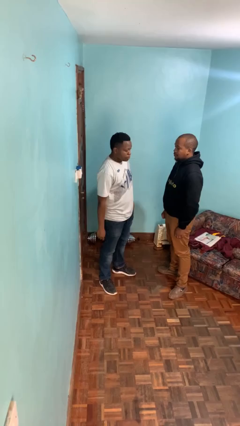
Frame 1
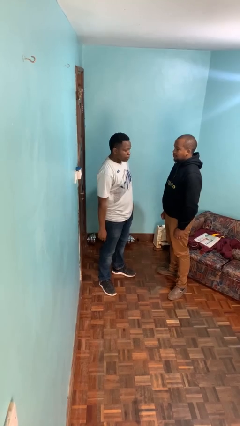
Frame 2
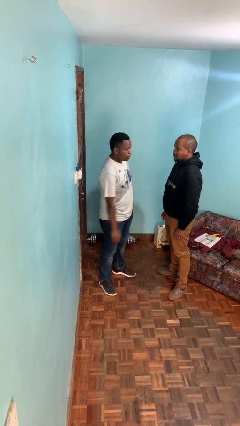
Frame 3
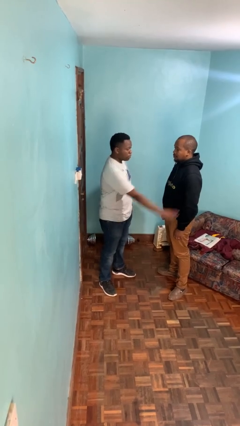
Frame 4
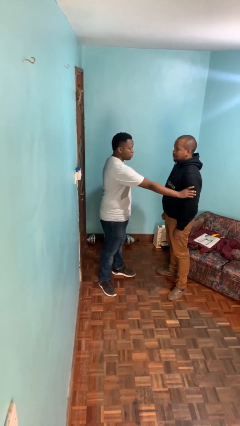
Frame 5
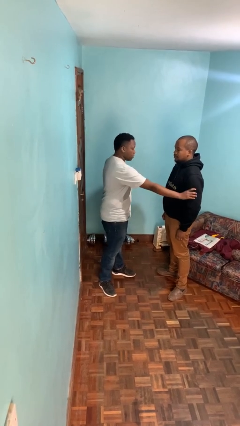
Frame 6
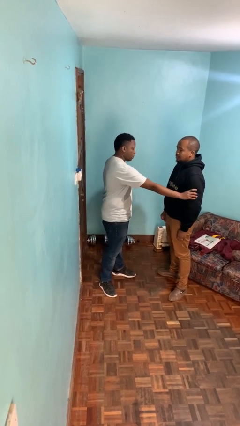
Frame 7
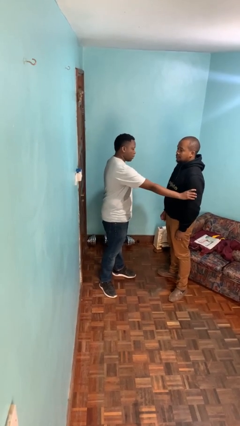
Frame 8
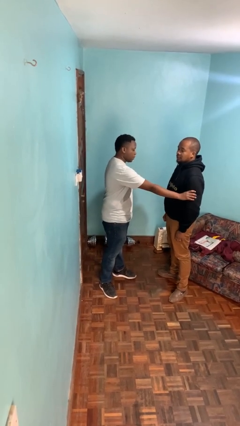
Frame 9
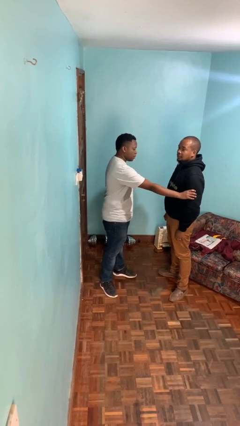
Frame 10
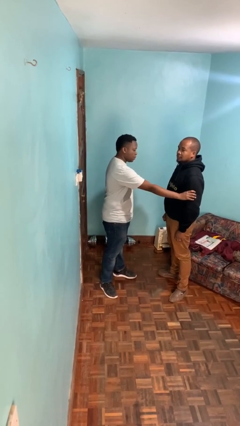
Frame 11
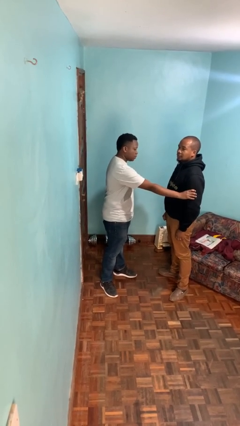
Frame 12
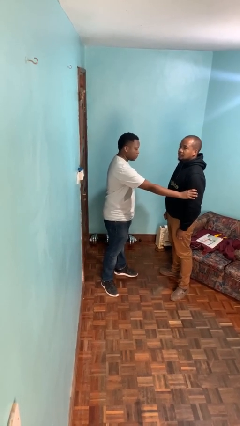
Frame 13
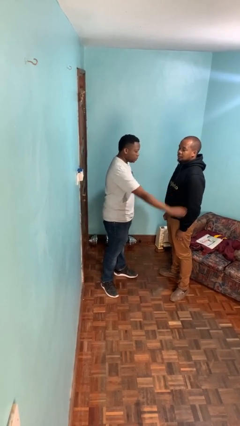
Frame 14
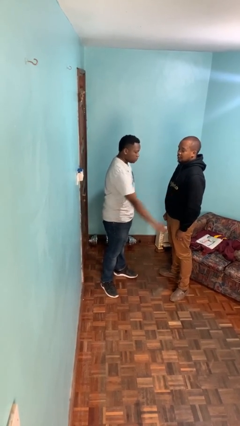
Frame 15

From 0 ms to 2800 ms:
person grabs person by bicep

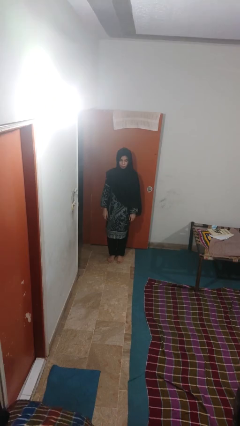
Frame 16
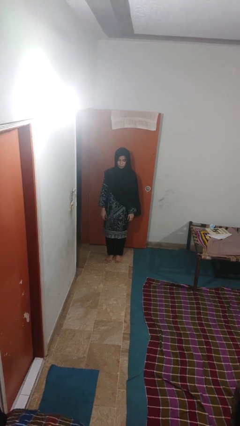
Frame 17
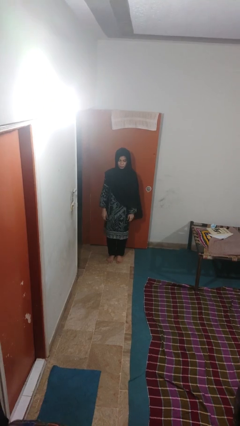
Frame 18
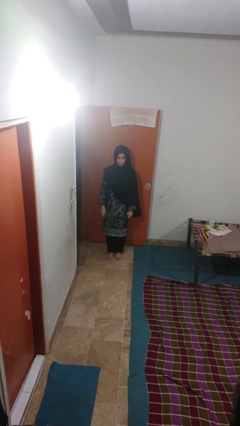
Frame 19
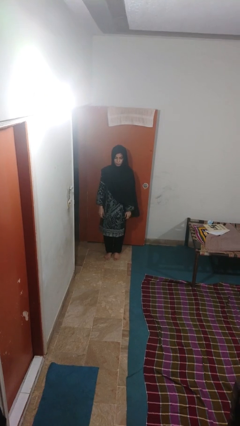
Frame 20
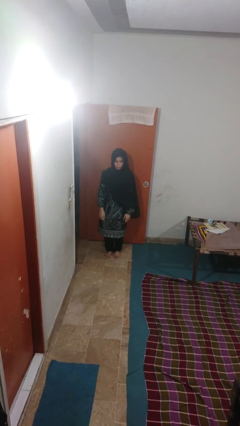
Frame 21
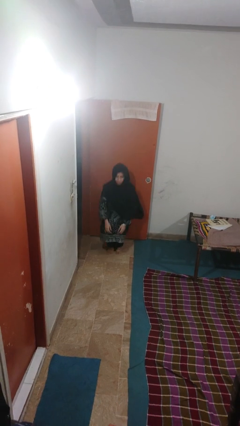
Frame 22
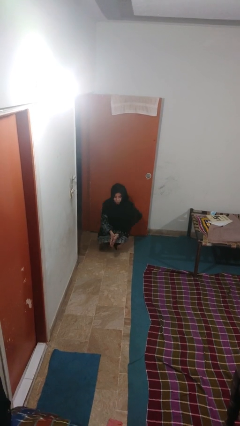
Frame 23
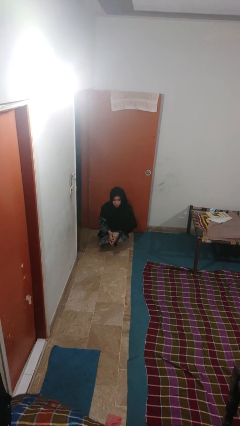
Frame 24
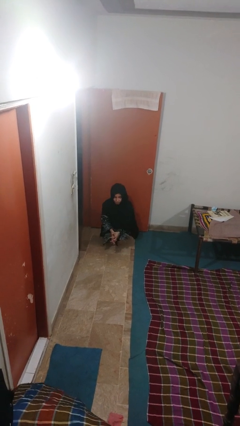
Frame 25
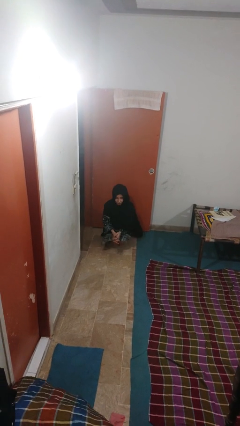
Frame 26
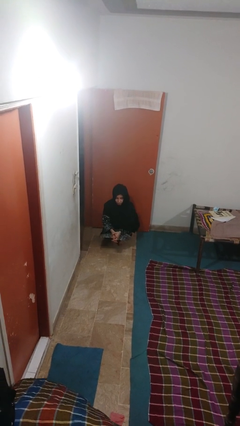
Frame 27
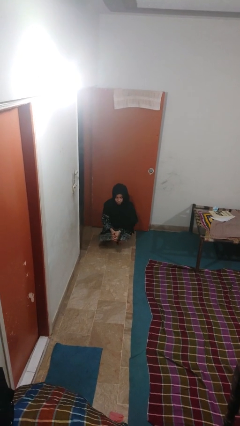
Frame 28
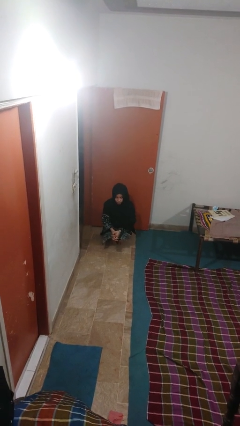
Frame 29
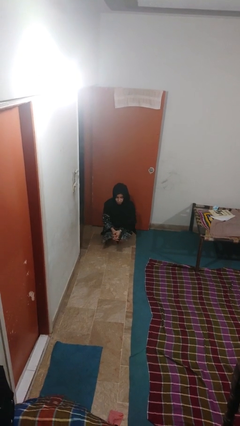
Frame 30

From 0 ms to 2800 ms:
person squats

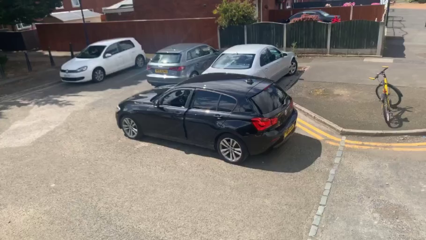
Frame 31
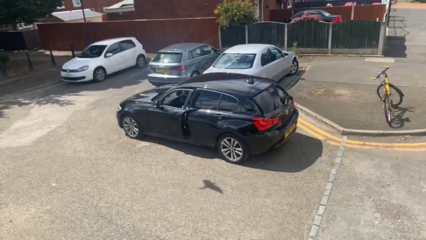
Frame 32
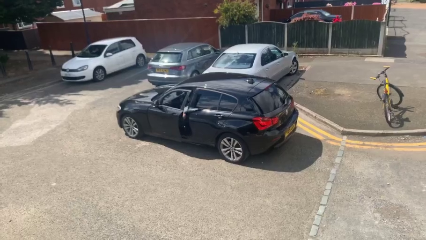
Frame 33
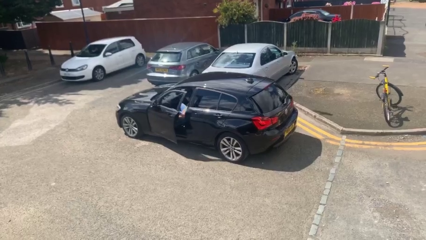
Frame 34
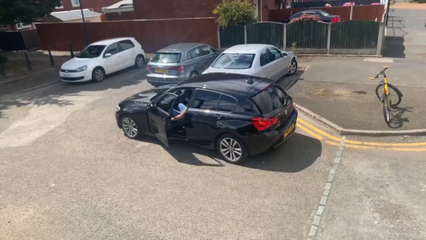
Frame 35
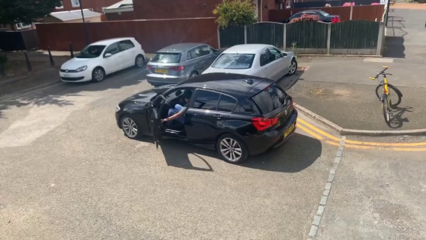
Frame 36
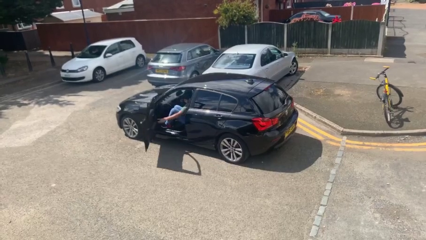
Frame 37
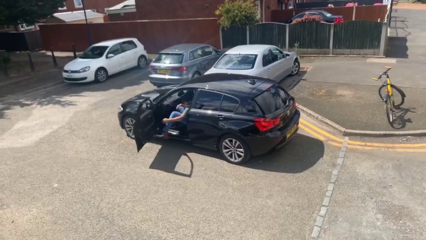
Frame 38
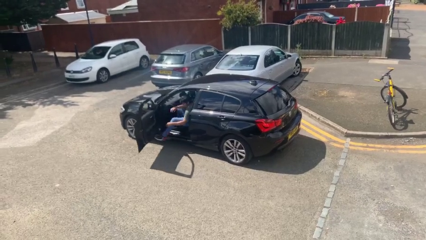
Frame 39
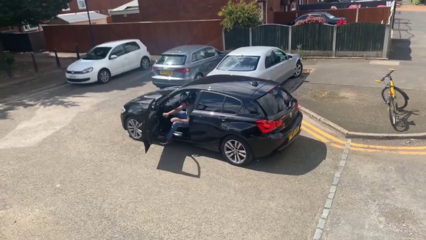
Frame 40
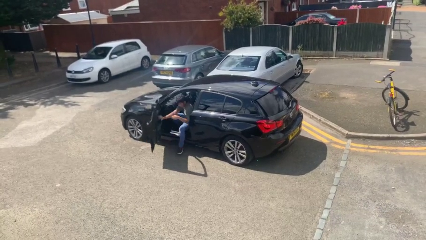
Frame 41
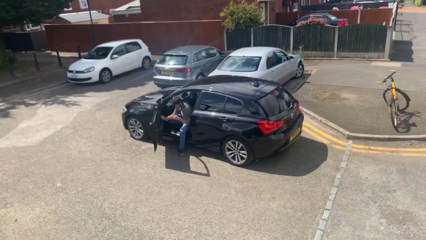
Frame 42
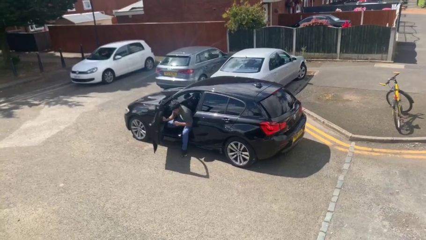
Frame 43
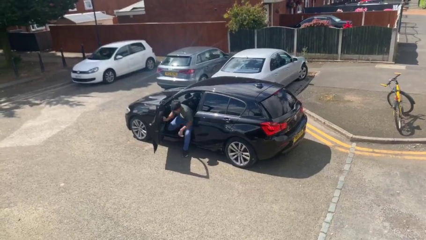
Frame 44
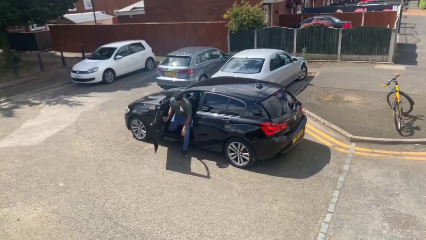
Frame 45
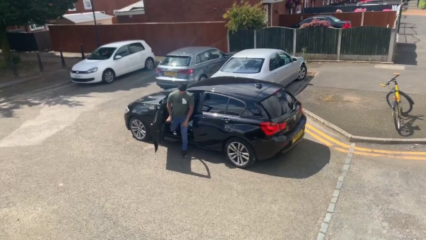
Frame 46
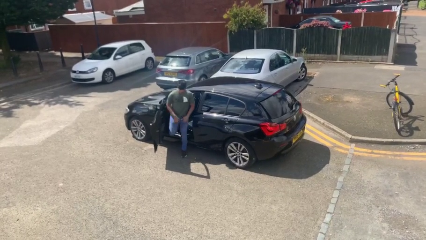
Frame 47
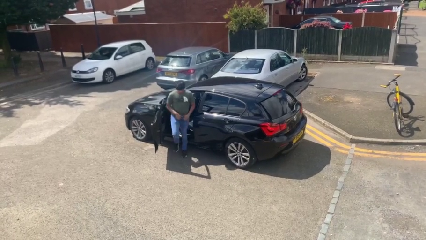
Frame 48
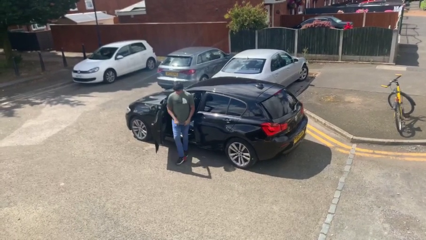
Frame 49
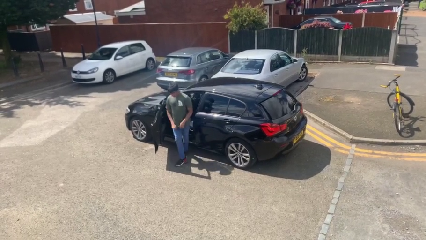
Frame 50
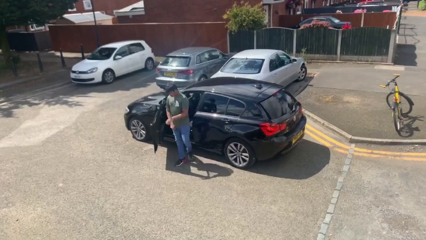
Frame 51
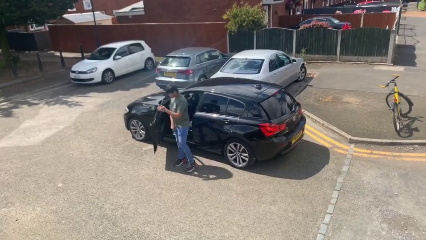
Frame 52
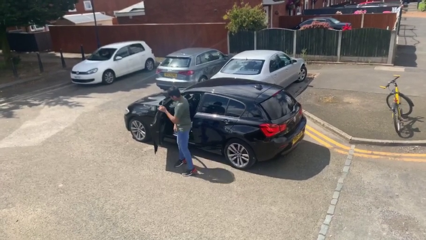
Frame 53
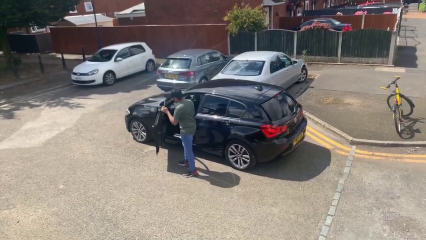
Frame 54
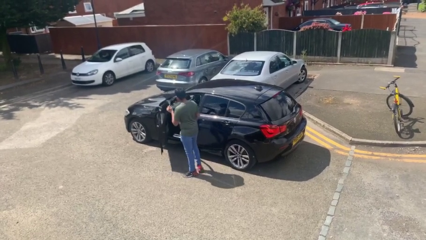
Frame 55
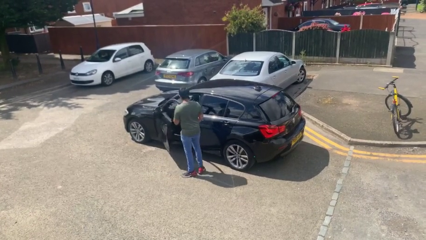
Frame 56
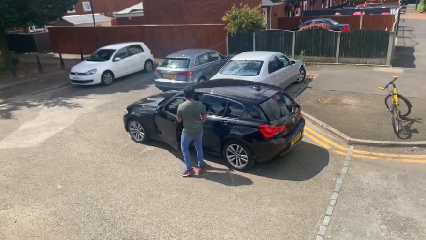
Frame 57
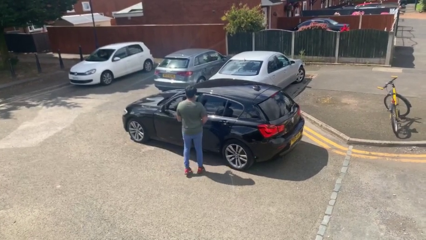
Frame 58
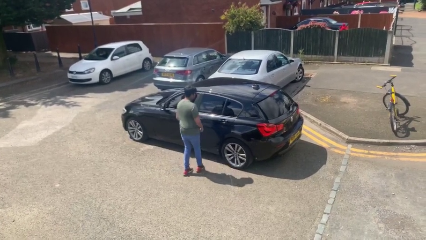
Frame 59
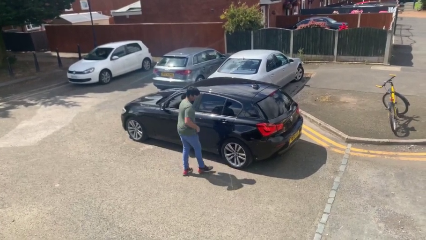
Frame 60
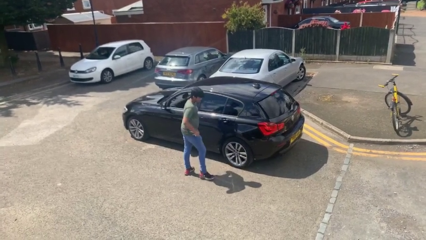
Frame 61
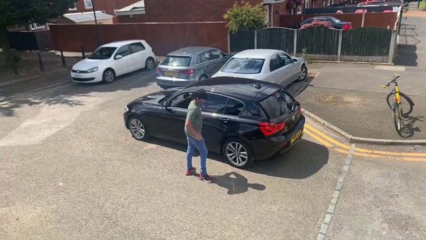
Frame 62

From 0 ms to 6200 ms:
car drops off person

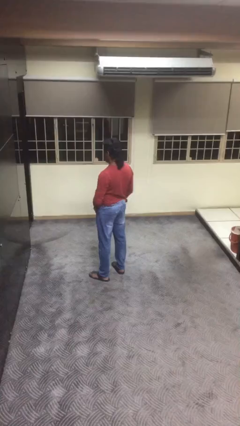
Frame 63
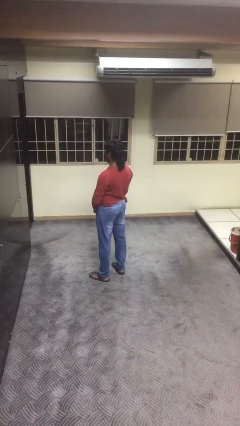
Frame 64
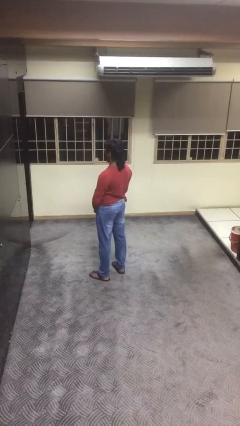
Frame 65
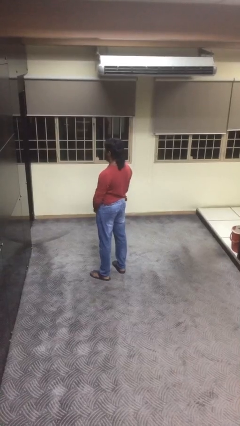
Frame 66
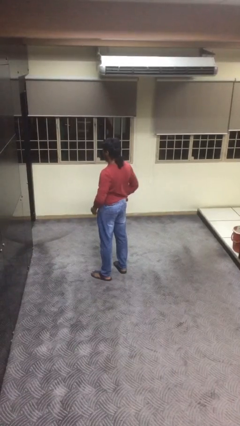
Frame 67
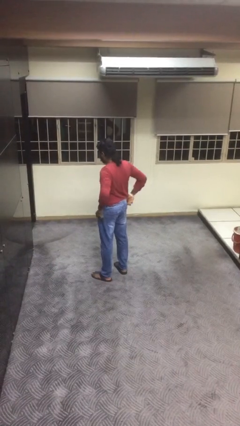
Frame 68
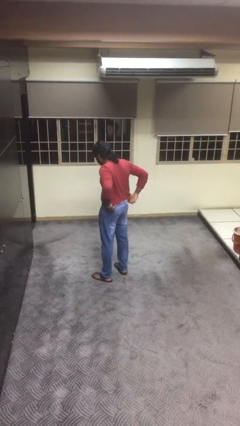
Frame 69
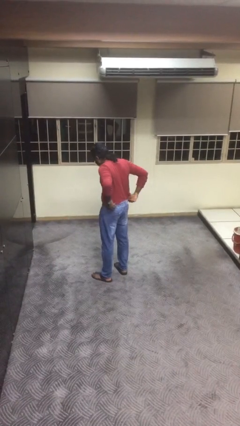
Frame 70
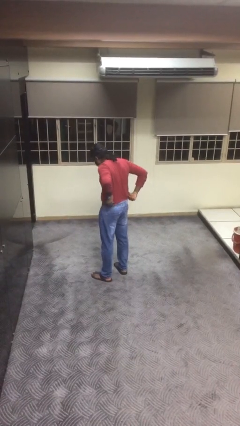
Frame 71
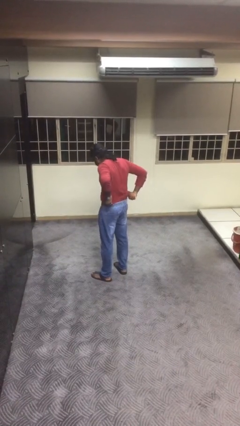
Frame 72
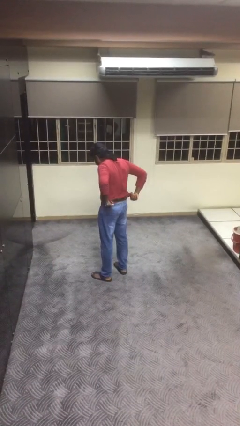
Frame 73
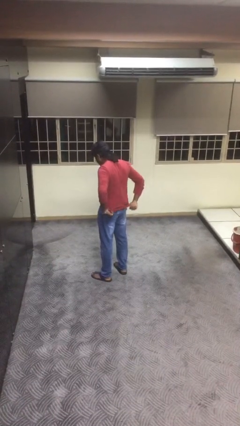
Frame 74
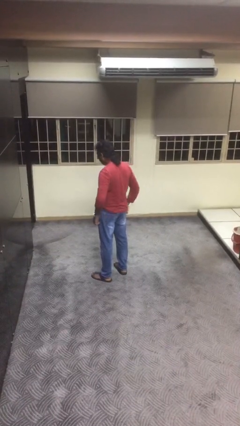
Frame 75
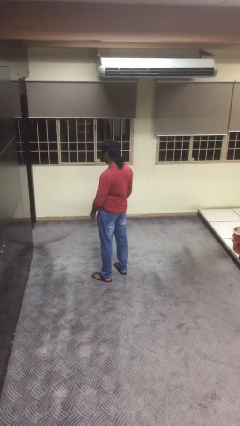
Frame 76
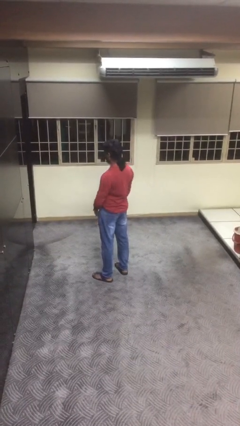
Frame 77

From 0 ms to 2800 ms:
person untucks shirt

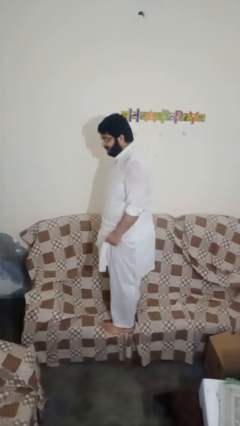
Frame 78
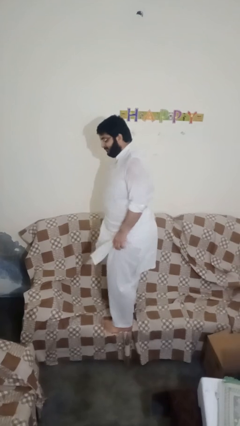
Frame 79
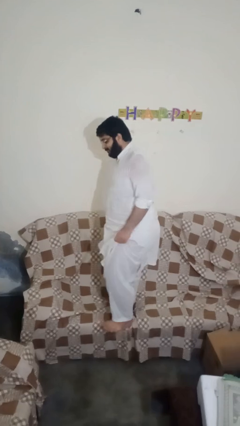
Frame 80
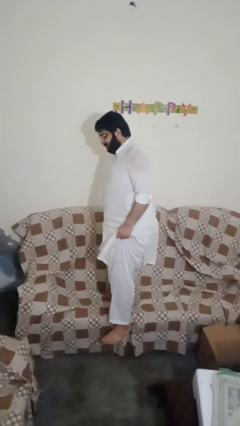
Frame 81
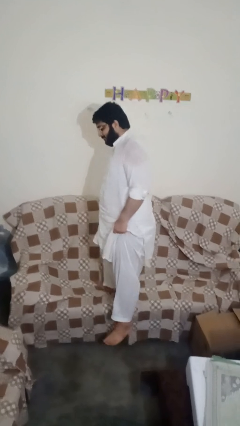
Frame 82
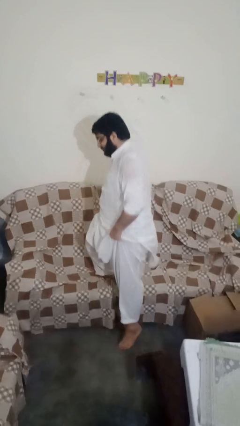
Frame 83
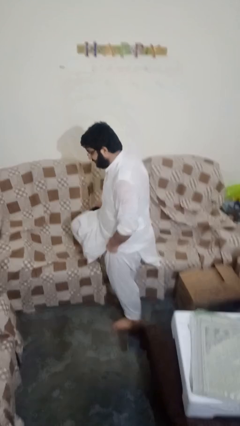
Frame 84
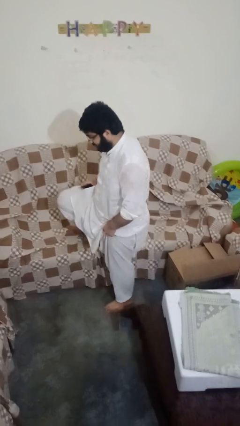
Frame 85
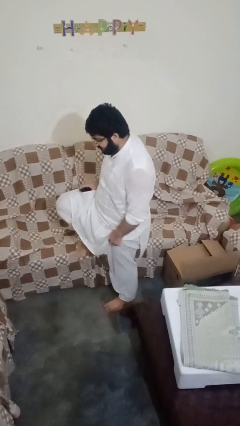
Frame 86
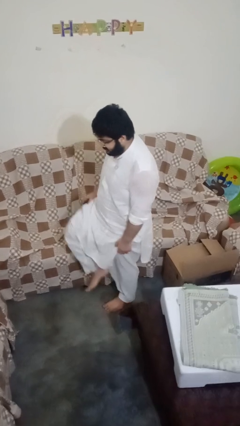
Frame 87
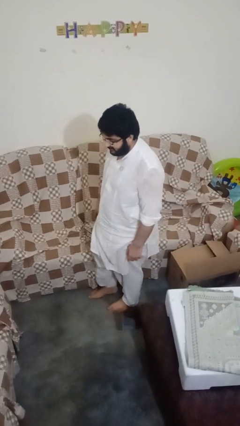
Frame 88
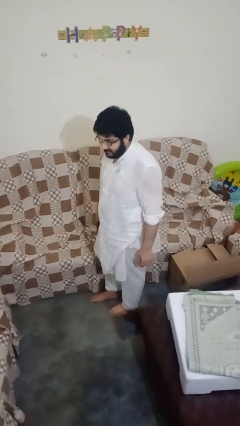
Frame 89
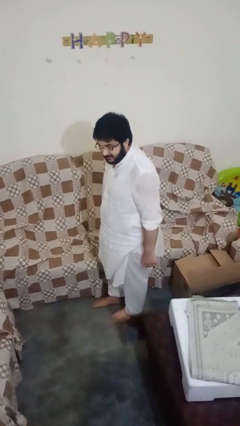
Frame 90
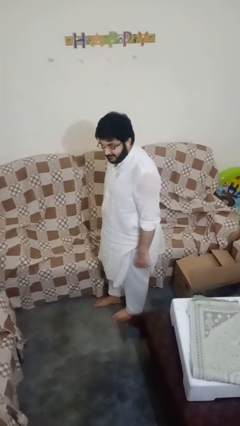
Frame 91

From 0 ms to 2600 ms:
person climbs off couch

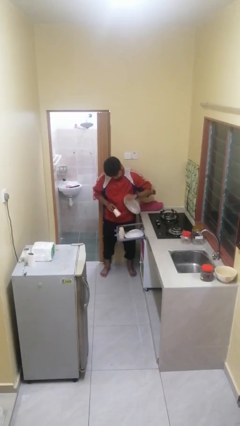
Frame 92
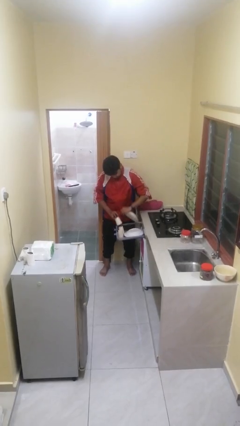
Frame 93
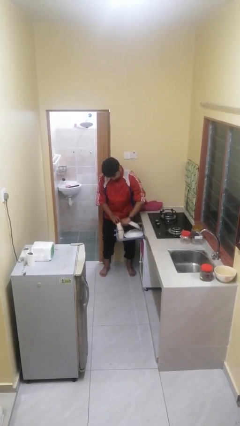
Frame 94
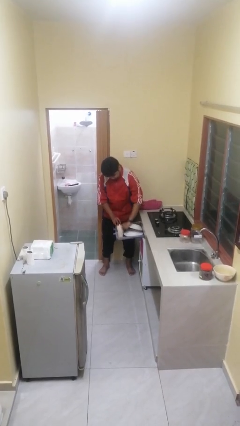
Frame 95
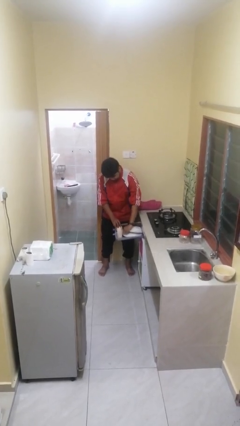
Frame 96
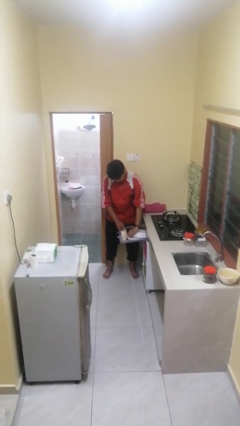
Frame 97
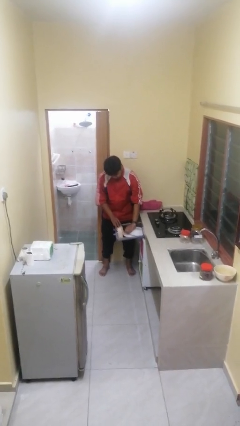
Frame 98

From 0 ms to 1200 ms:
person puts object into kitchen drawer
